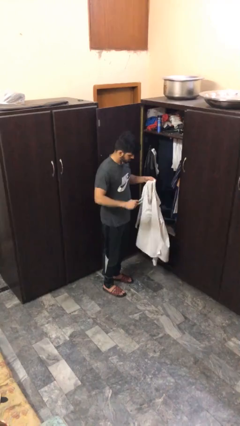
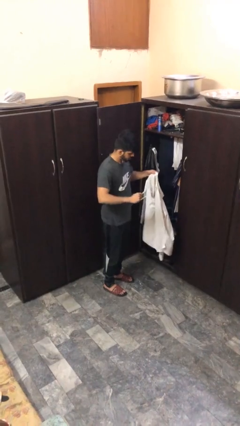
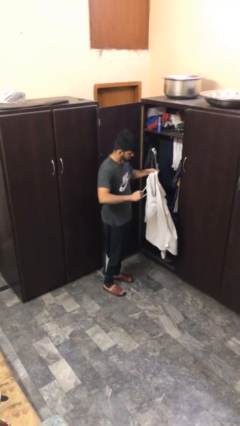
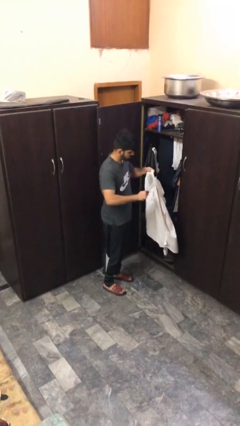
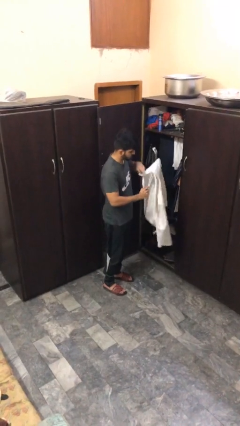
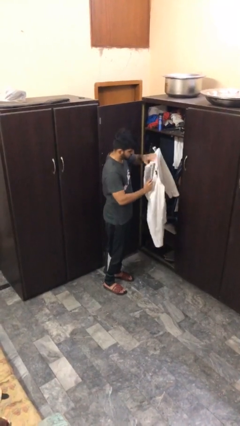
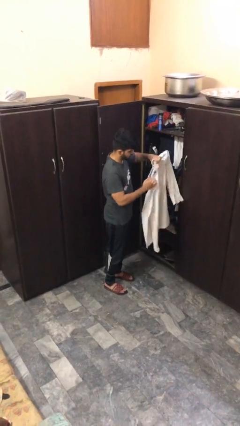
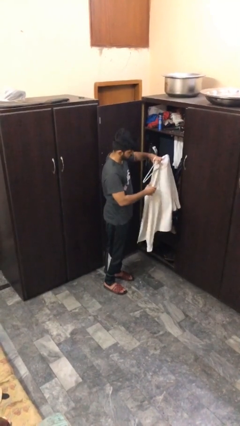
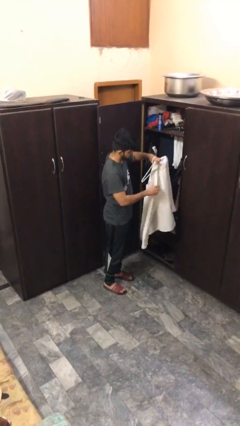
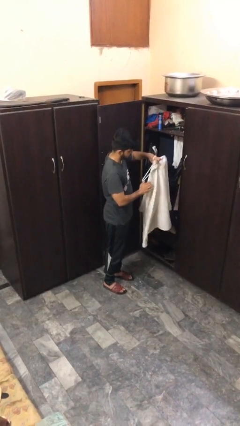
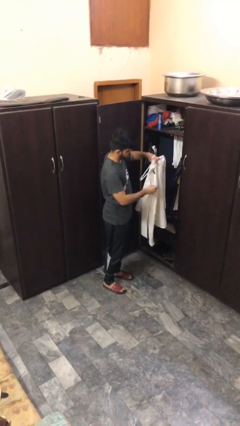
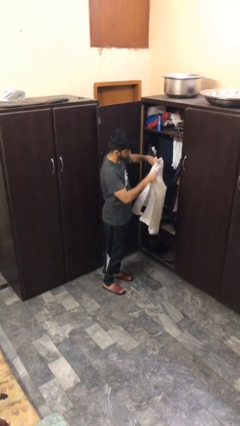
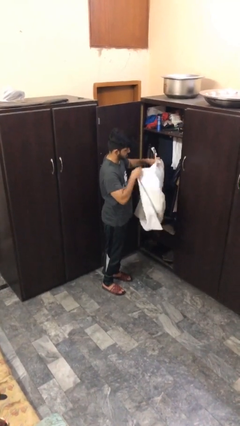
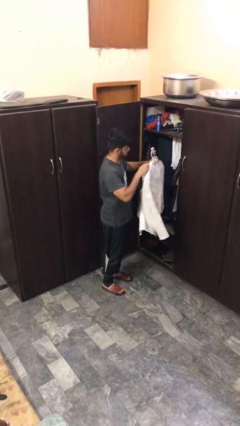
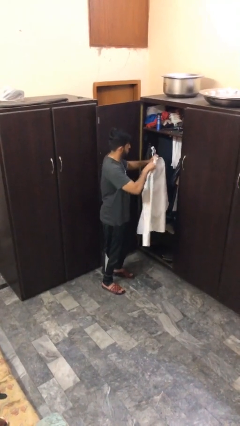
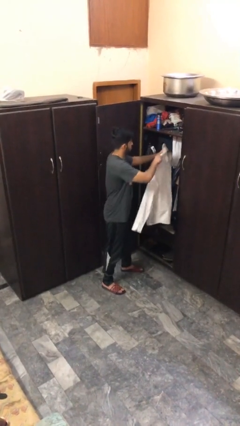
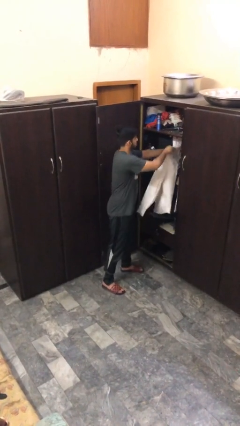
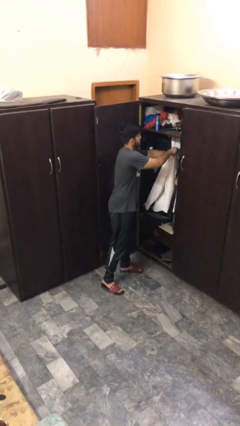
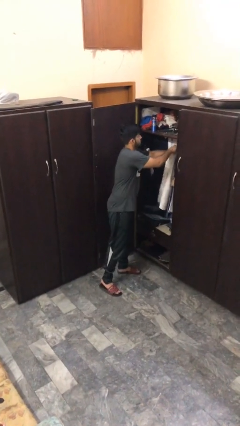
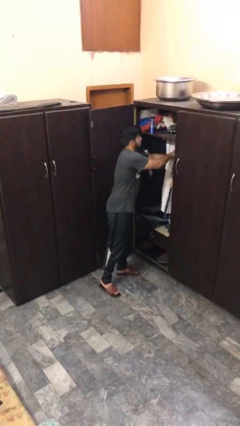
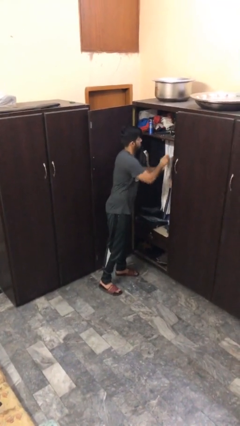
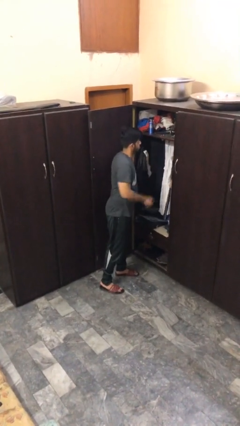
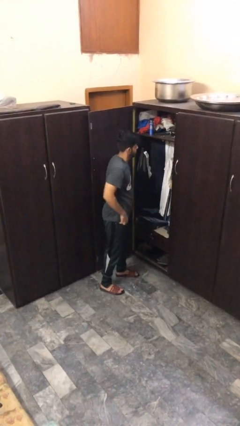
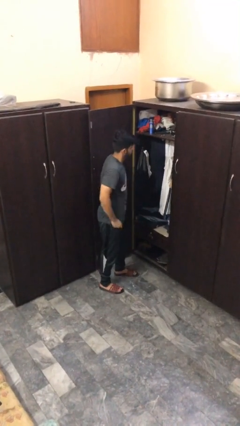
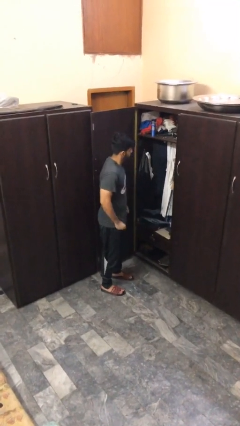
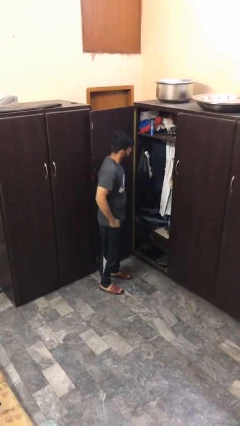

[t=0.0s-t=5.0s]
person puts clothes into closet

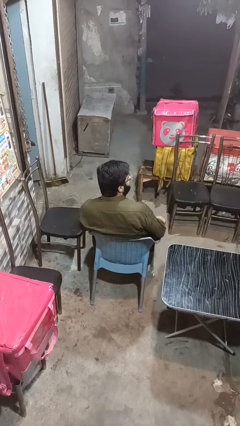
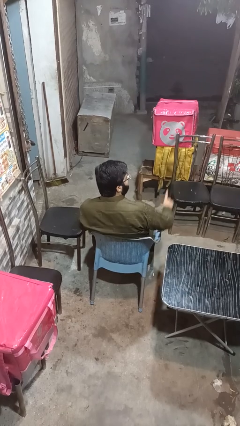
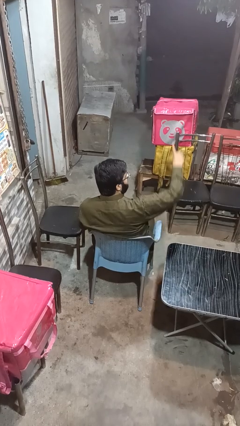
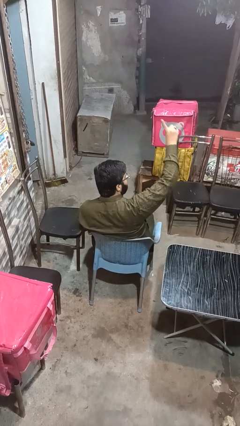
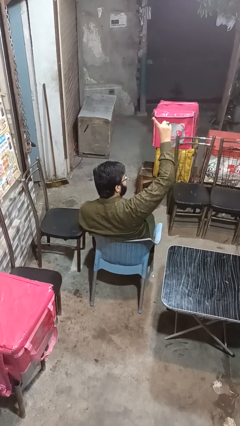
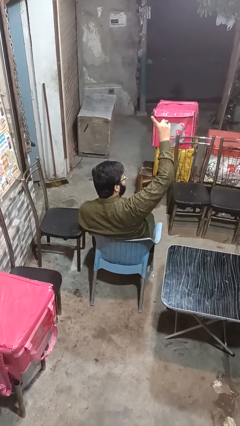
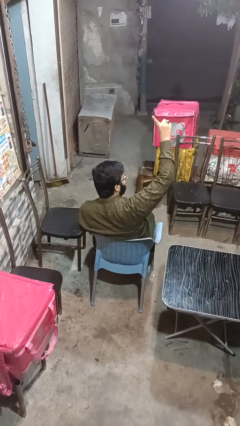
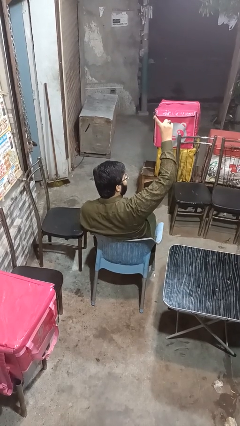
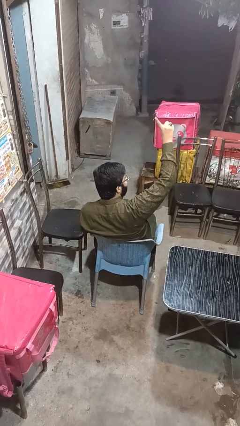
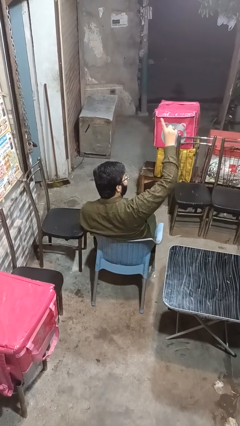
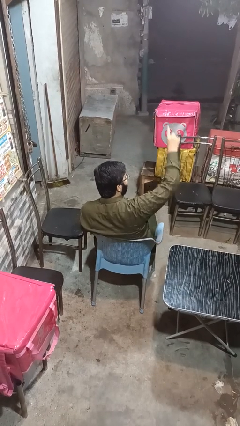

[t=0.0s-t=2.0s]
person gestures number one

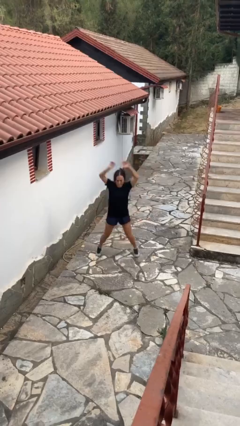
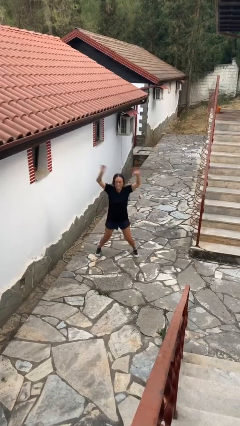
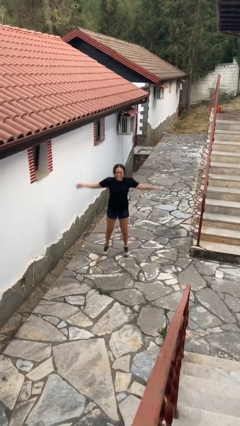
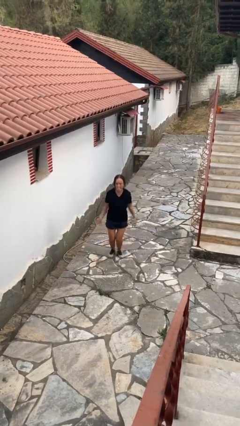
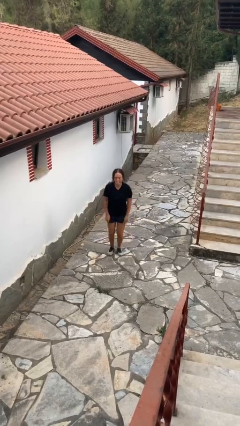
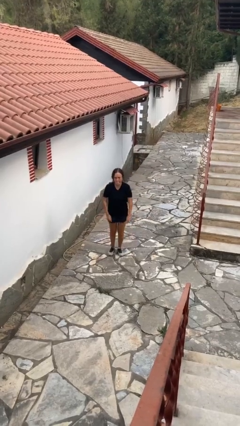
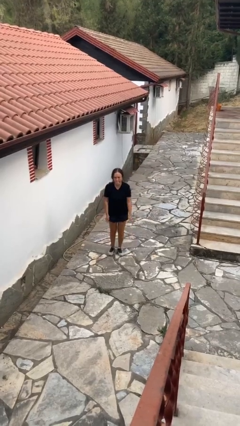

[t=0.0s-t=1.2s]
person exercises with jumping jacks

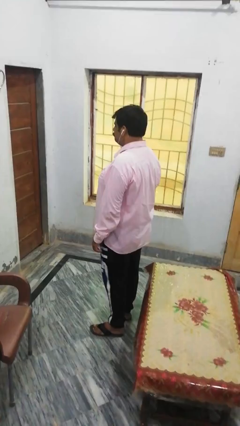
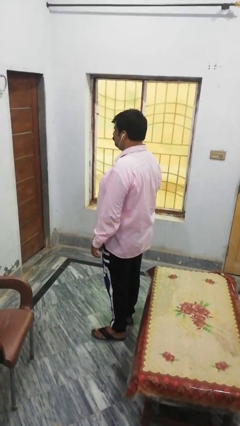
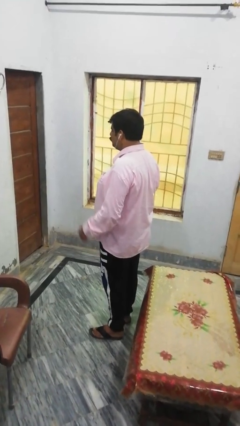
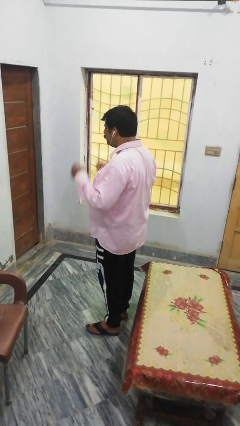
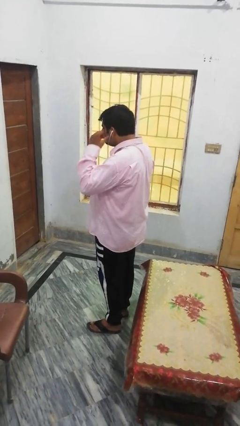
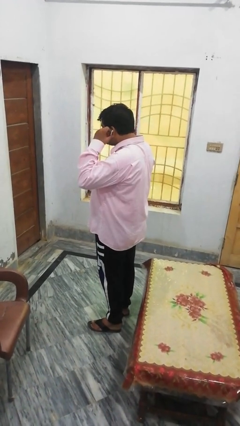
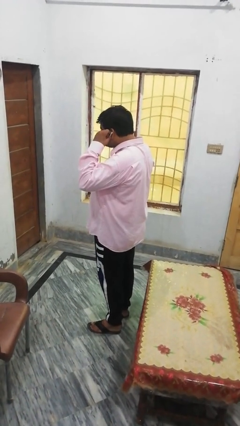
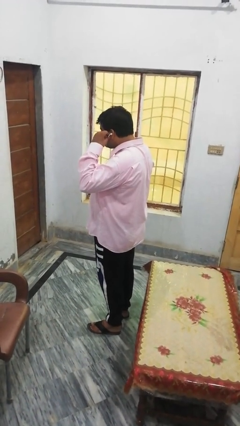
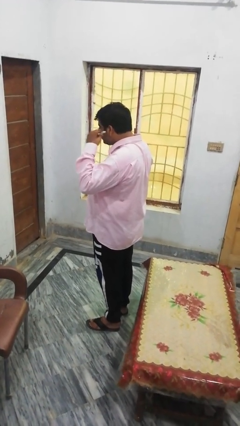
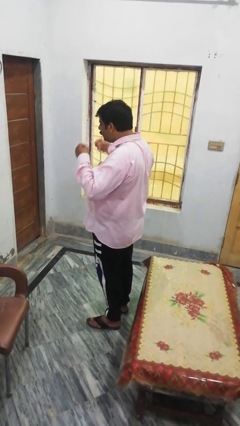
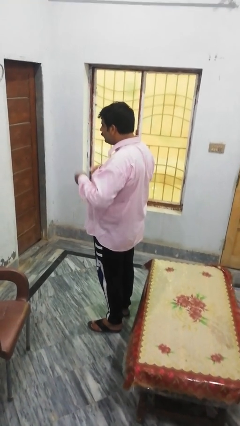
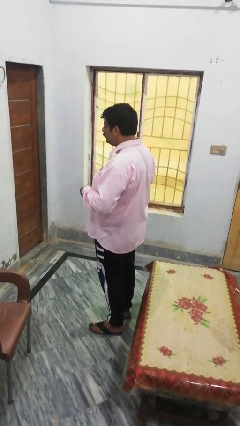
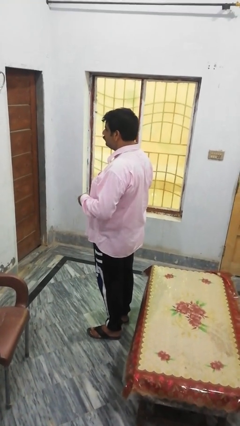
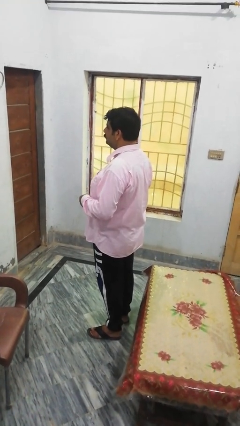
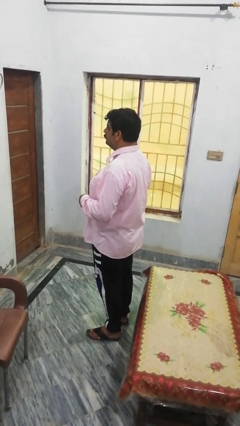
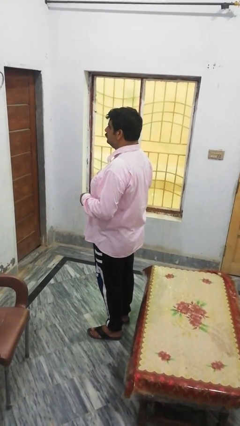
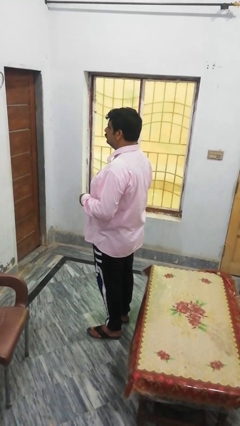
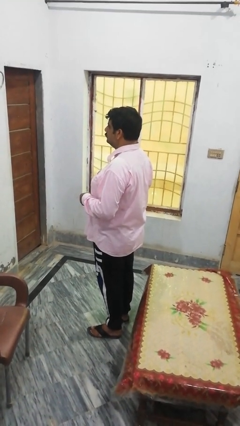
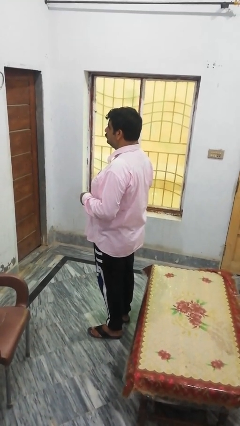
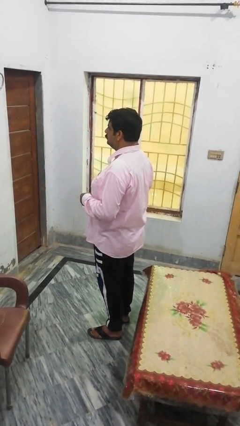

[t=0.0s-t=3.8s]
person takes off headphones

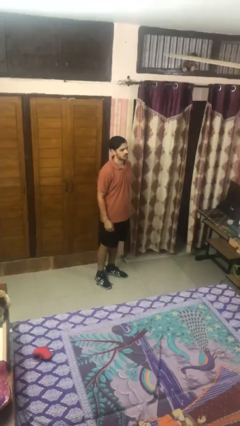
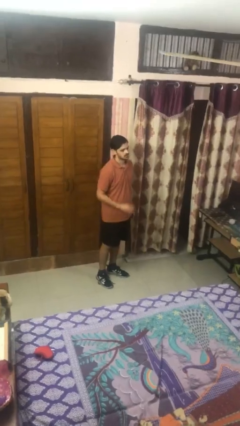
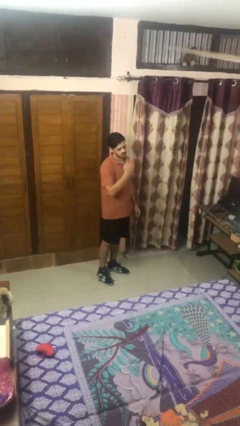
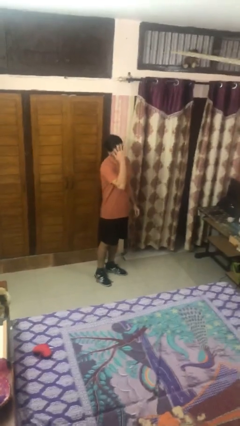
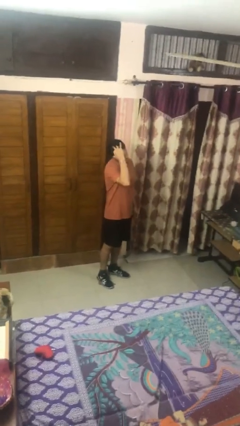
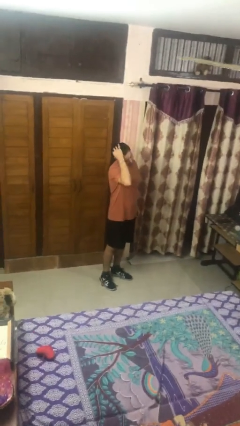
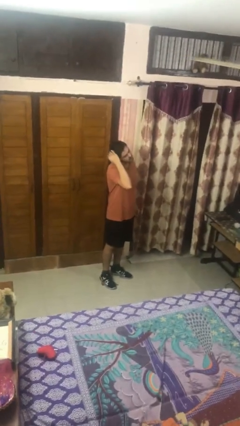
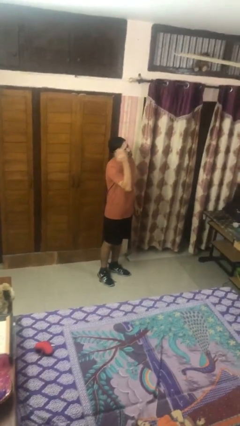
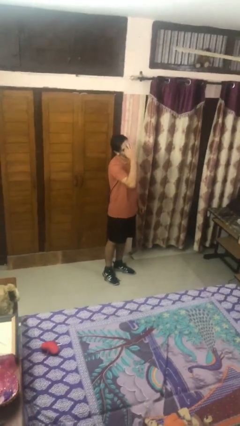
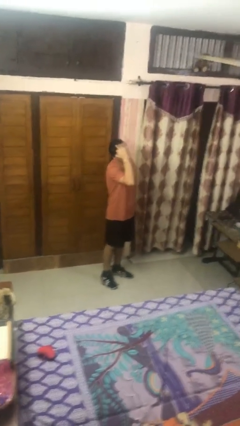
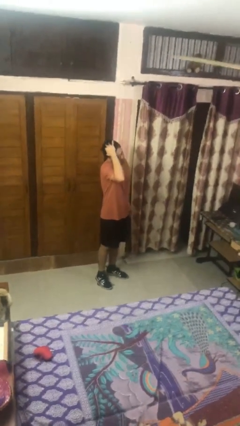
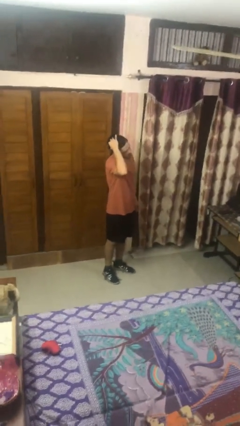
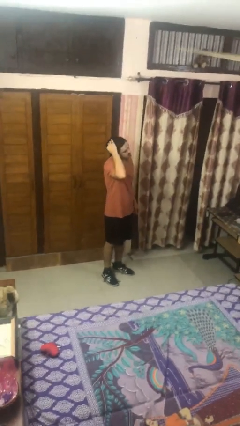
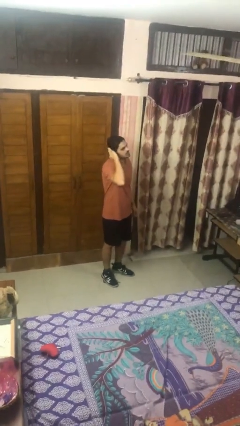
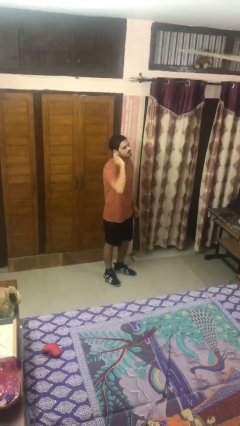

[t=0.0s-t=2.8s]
person strokes hair

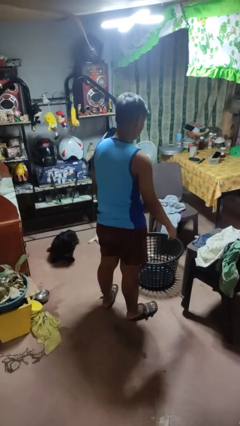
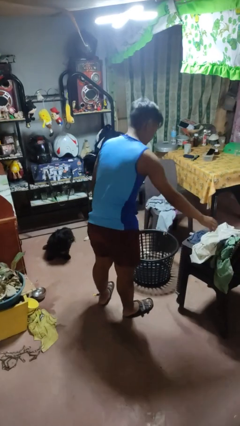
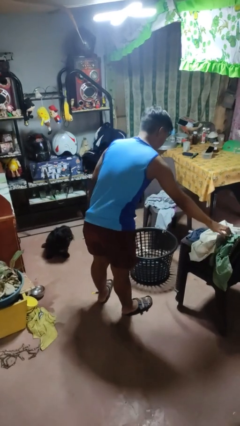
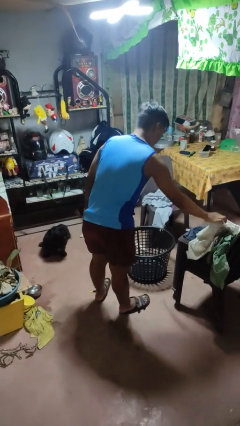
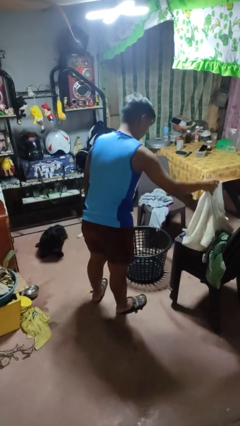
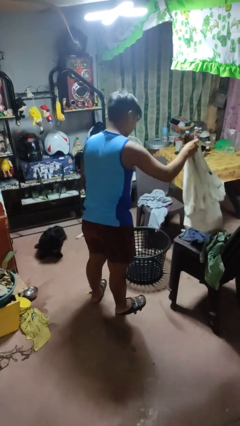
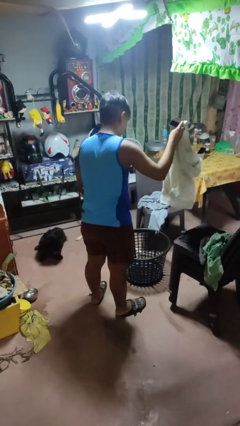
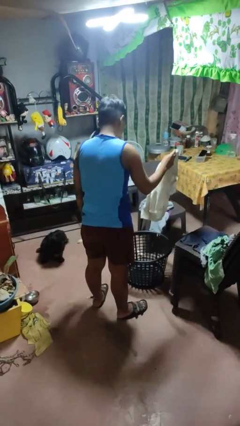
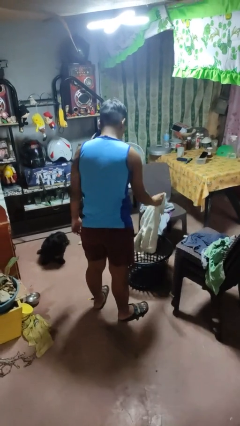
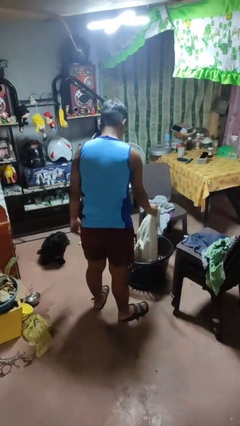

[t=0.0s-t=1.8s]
person puts object into basket

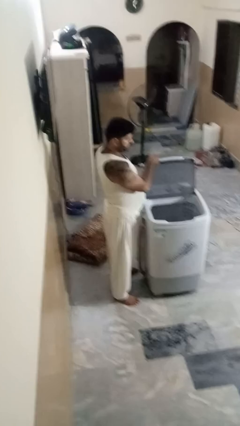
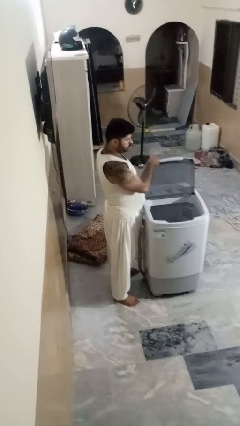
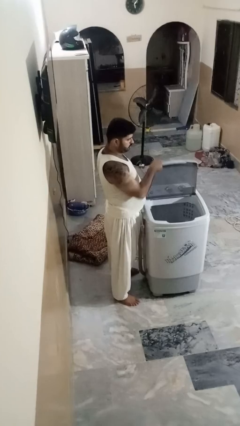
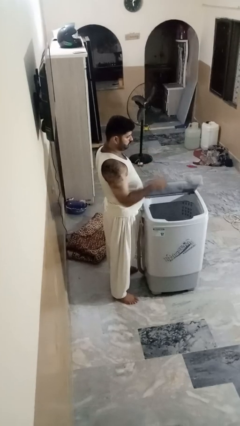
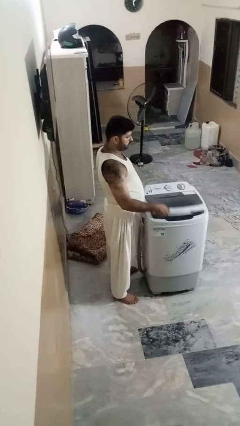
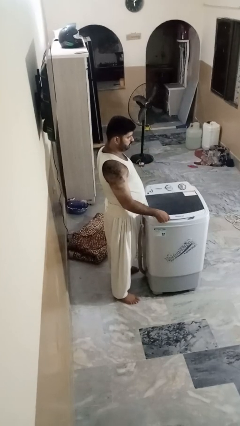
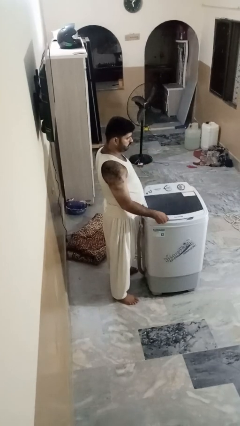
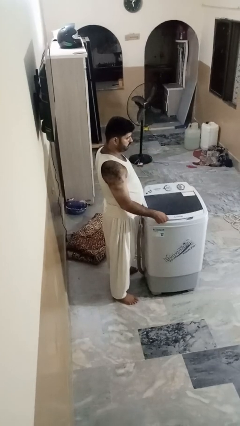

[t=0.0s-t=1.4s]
person closes clothes washer
